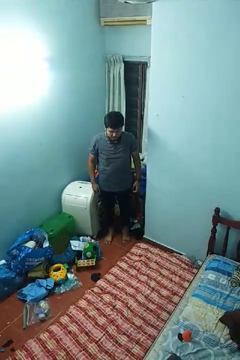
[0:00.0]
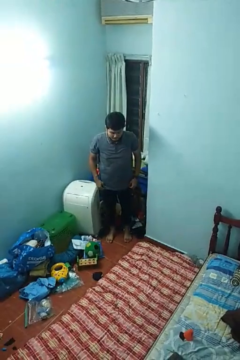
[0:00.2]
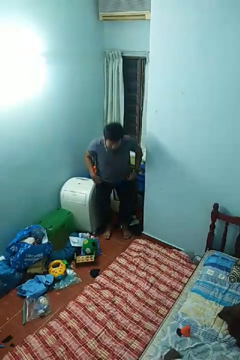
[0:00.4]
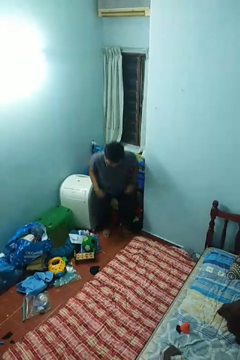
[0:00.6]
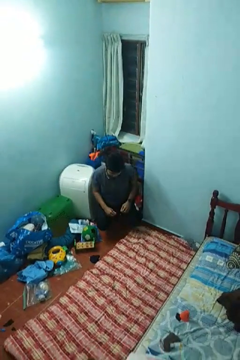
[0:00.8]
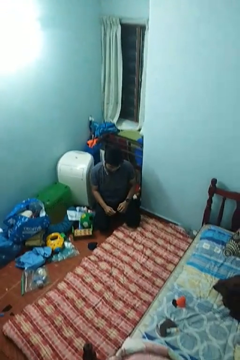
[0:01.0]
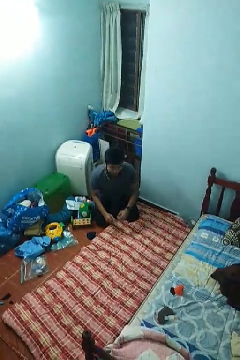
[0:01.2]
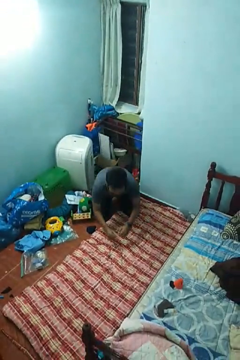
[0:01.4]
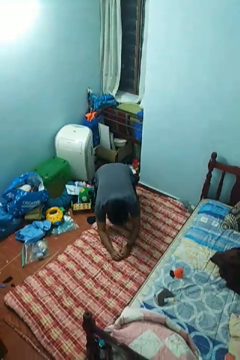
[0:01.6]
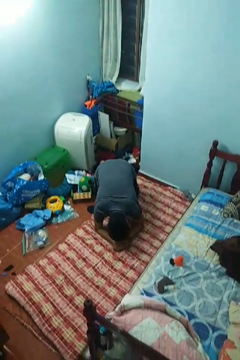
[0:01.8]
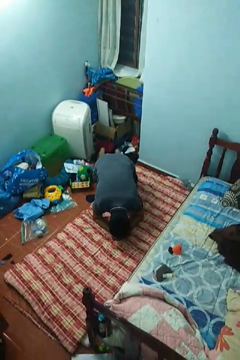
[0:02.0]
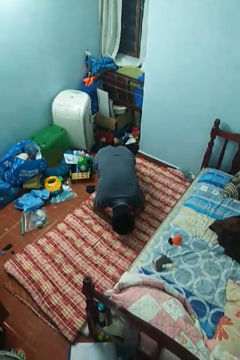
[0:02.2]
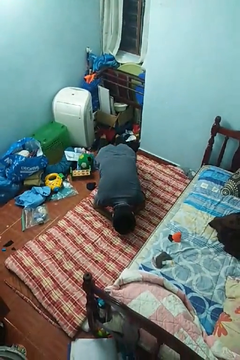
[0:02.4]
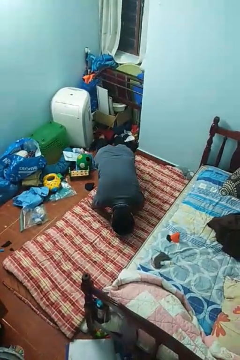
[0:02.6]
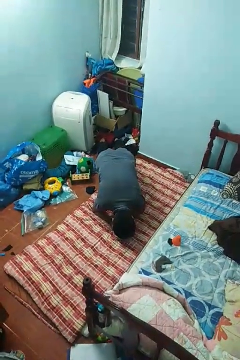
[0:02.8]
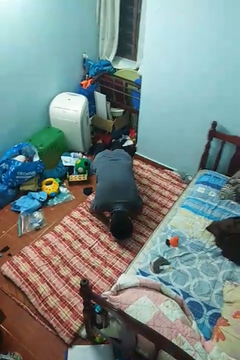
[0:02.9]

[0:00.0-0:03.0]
person exercises with plank

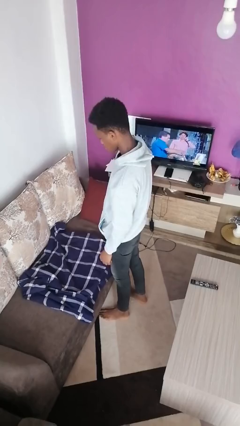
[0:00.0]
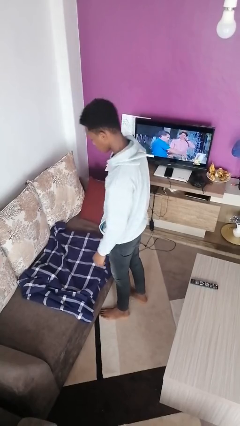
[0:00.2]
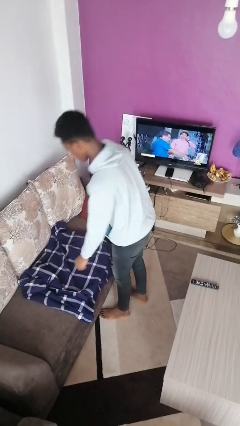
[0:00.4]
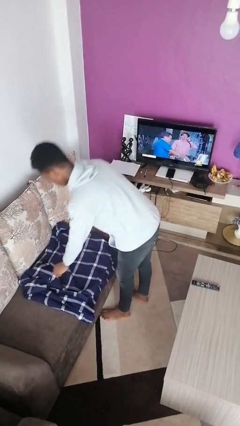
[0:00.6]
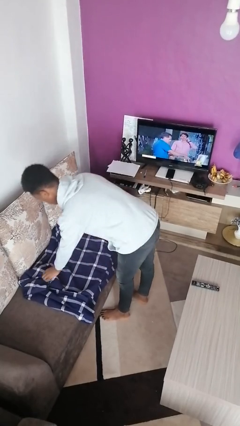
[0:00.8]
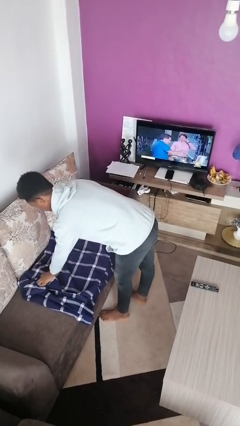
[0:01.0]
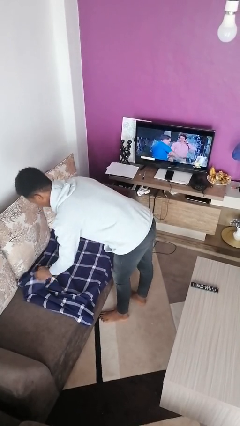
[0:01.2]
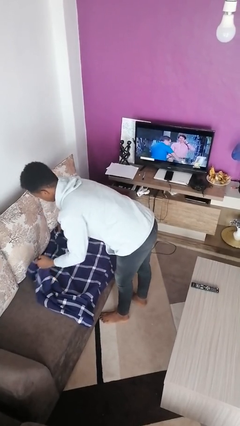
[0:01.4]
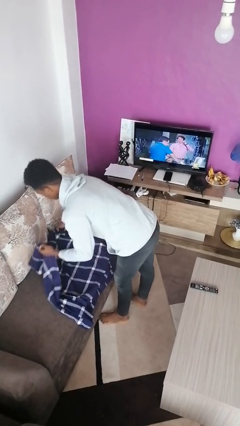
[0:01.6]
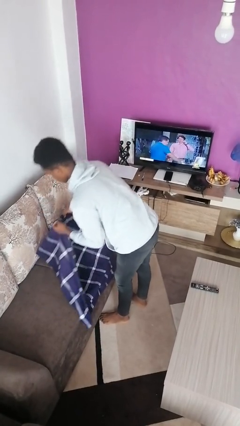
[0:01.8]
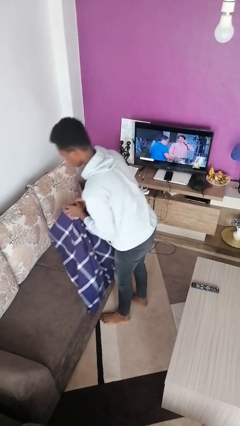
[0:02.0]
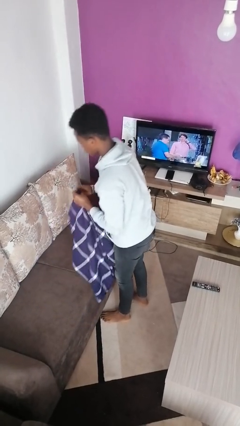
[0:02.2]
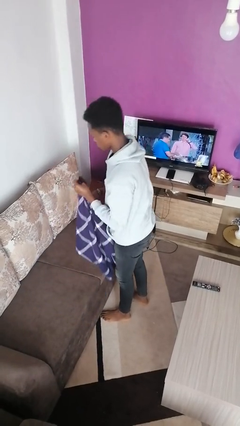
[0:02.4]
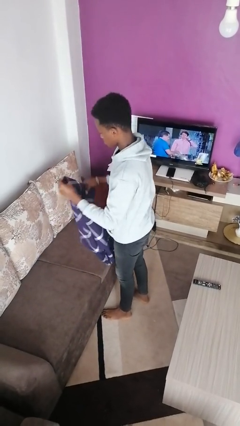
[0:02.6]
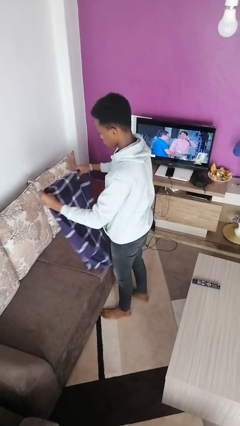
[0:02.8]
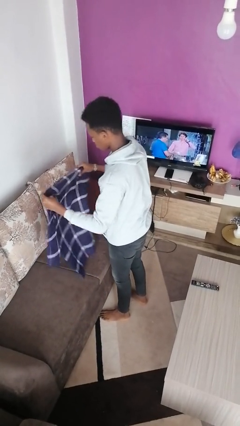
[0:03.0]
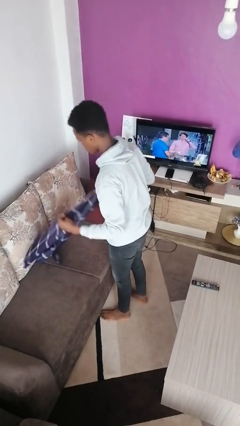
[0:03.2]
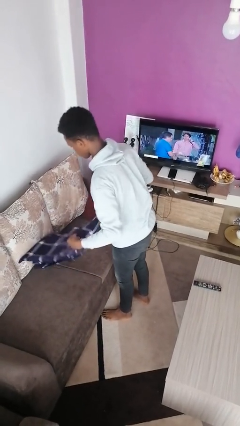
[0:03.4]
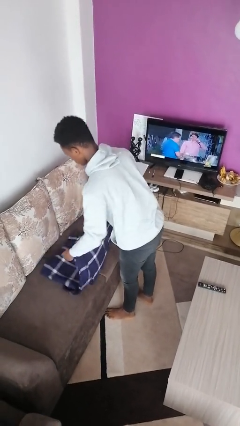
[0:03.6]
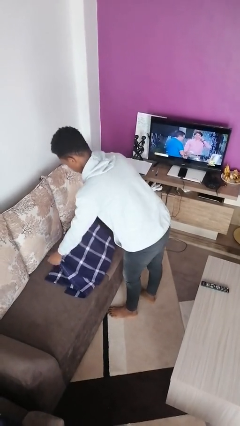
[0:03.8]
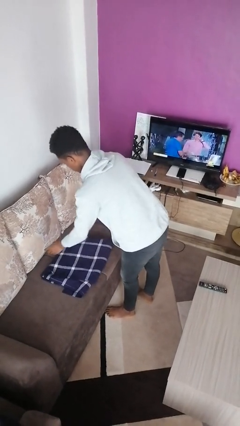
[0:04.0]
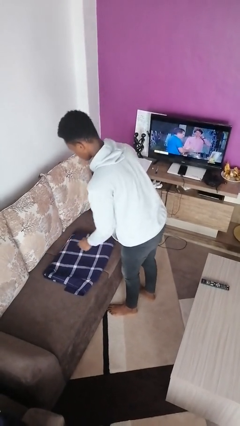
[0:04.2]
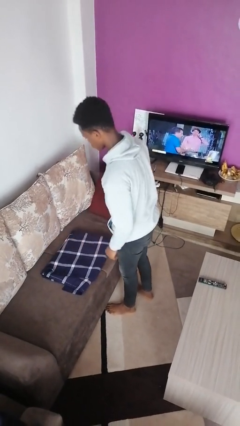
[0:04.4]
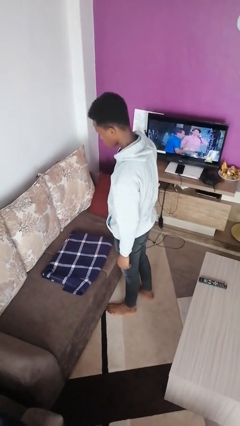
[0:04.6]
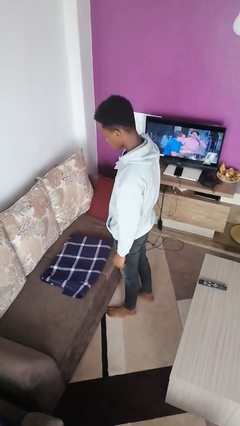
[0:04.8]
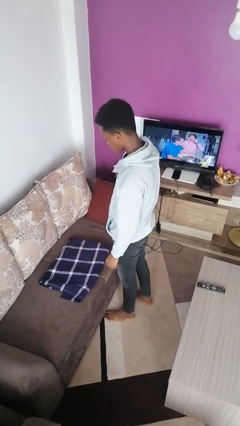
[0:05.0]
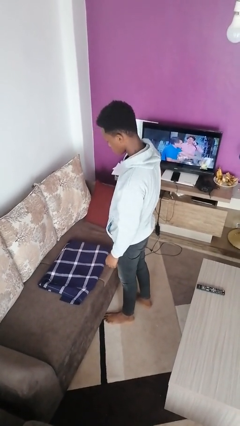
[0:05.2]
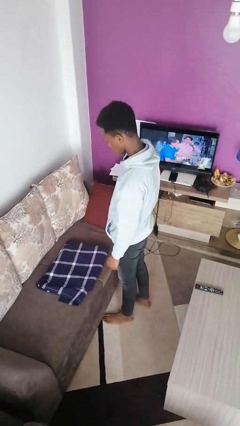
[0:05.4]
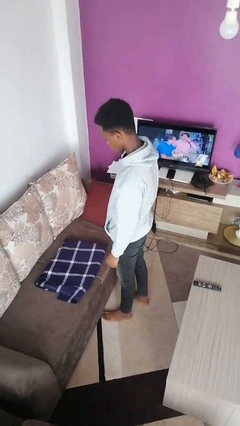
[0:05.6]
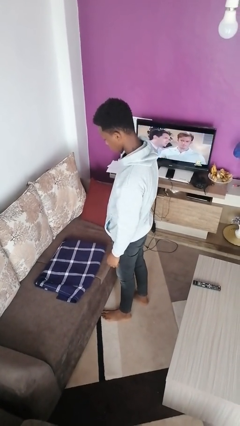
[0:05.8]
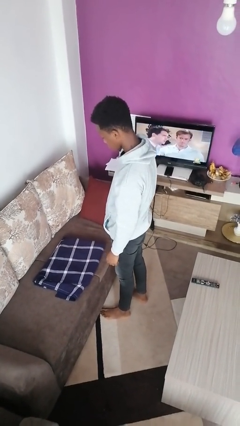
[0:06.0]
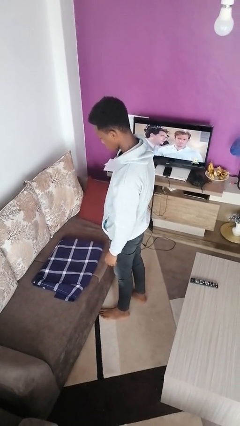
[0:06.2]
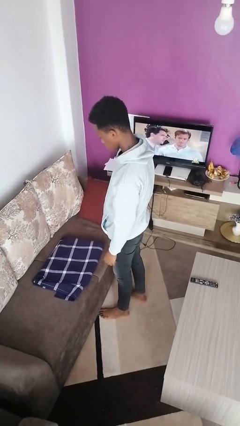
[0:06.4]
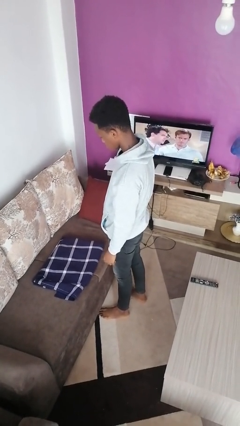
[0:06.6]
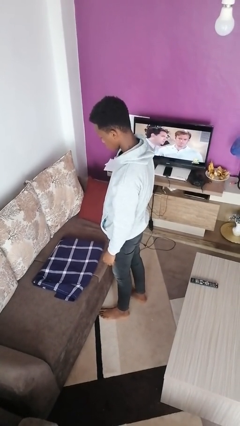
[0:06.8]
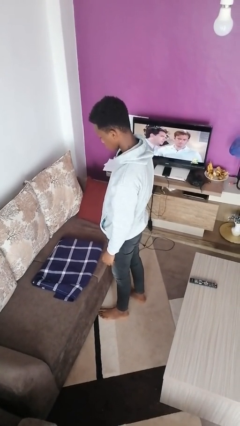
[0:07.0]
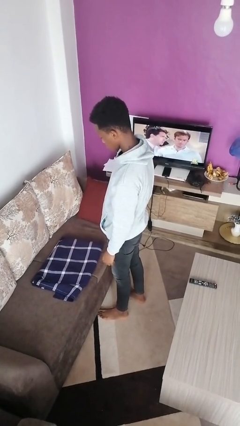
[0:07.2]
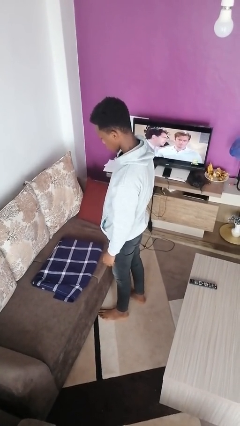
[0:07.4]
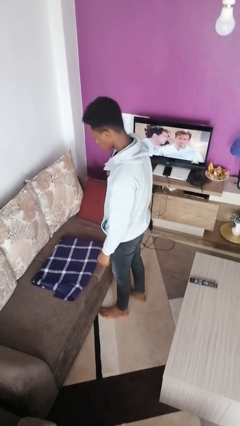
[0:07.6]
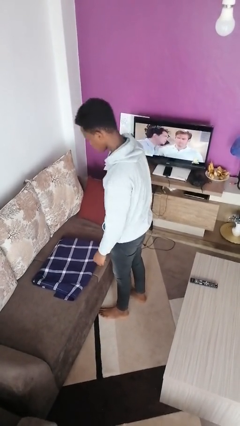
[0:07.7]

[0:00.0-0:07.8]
person folds blanket

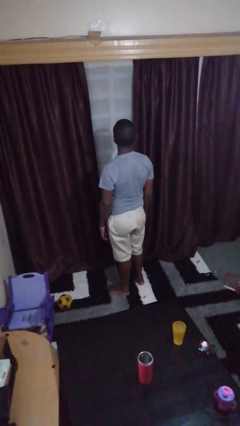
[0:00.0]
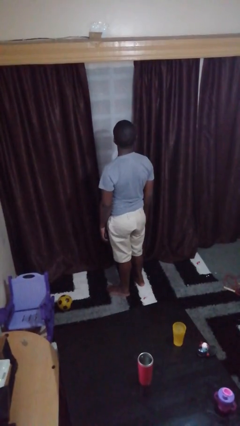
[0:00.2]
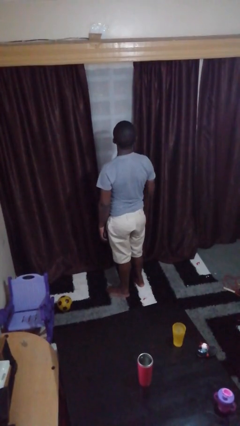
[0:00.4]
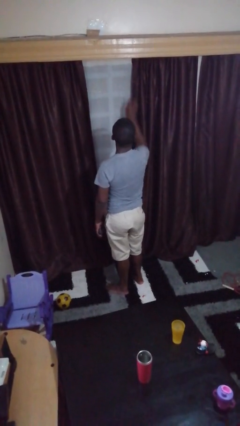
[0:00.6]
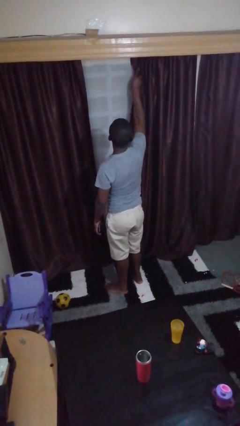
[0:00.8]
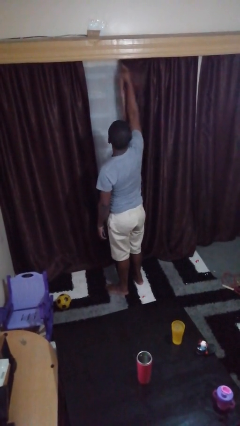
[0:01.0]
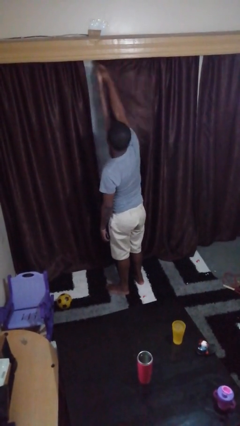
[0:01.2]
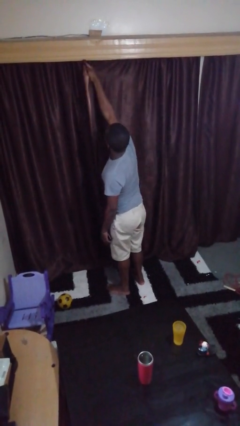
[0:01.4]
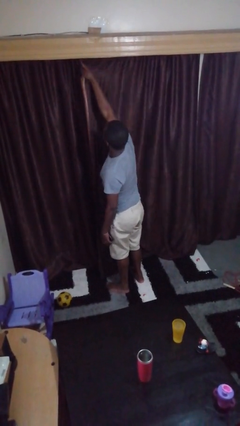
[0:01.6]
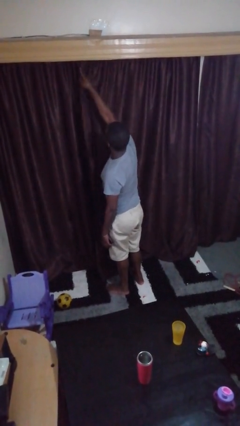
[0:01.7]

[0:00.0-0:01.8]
person closes curtains

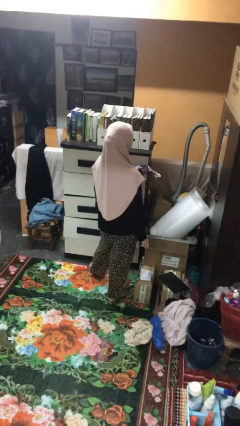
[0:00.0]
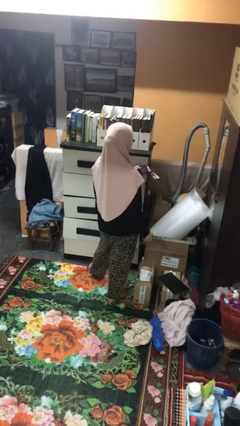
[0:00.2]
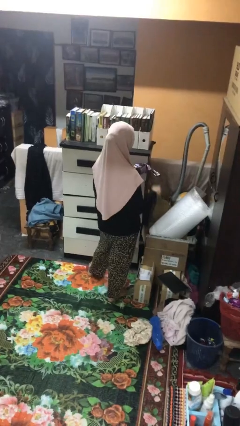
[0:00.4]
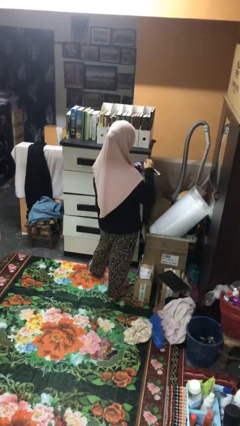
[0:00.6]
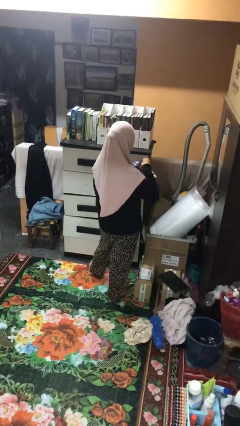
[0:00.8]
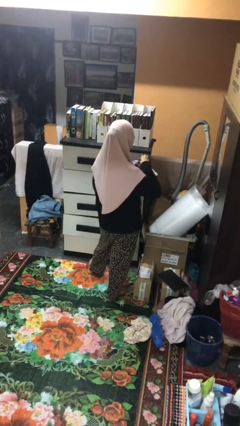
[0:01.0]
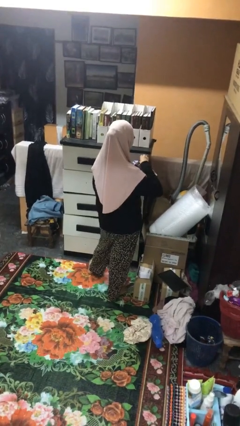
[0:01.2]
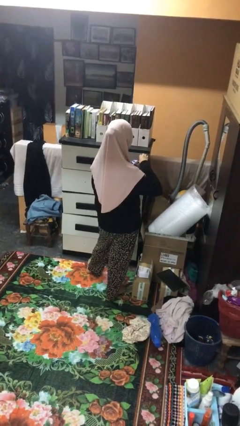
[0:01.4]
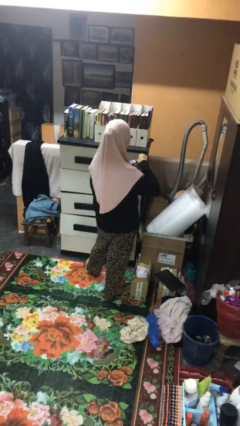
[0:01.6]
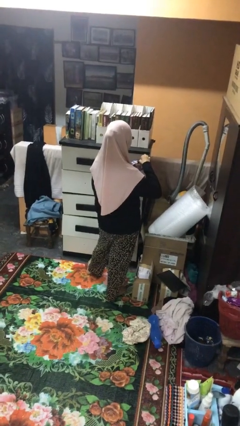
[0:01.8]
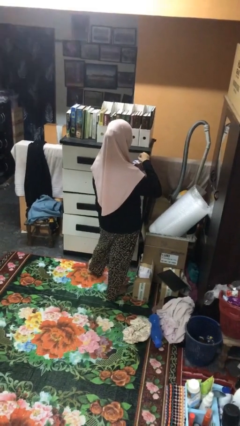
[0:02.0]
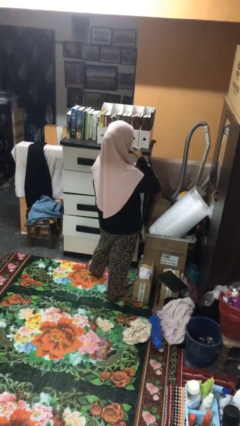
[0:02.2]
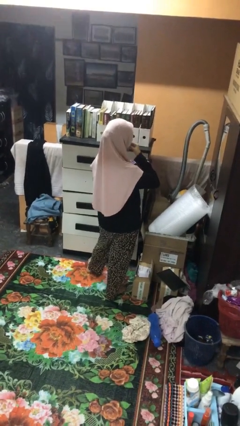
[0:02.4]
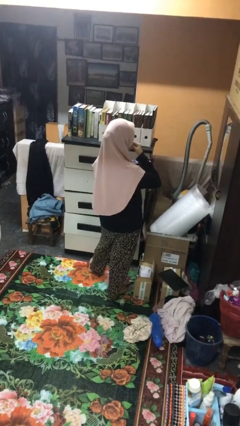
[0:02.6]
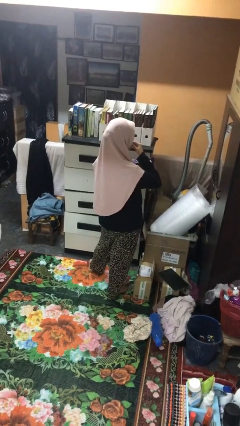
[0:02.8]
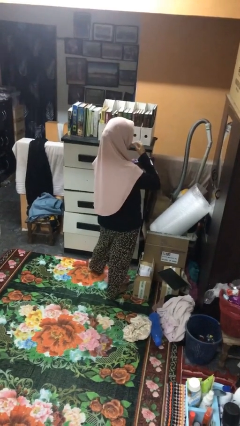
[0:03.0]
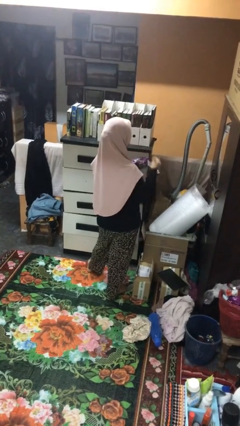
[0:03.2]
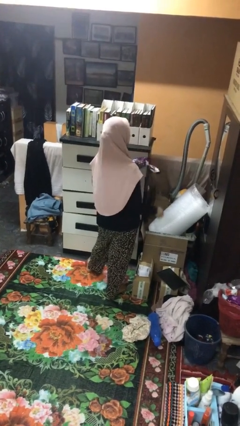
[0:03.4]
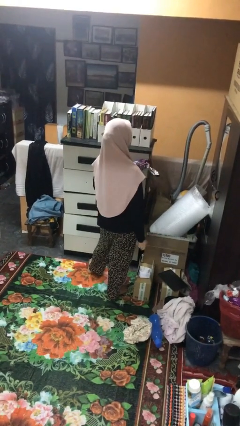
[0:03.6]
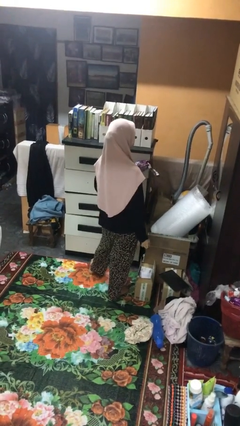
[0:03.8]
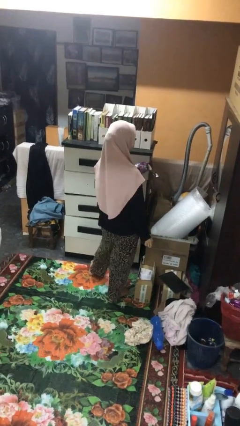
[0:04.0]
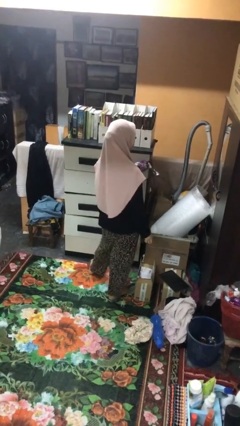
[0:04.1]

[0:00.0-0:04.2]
person eats snack from bag

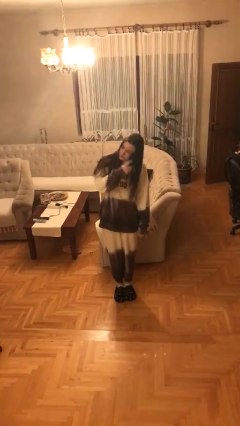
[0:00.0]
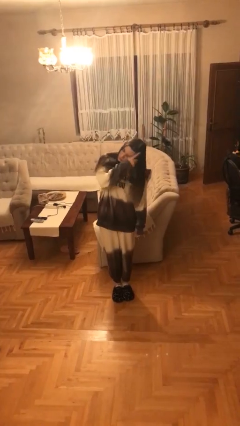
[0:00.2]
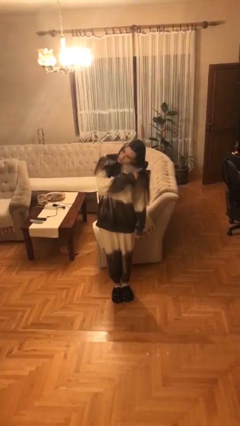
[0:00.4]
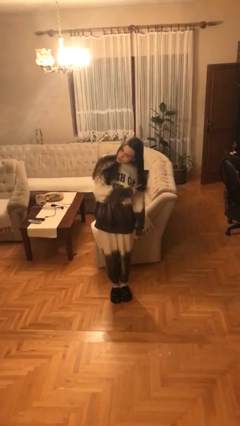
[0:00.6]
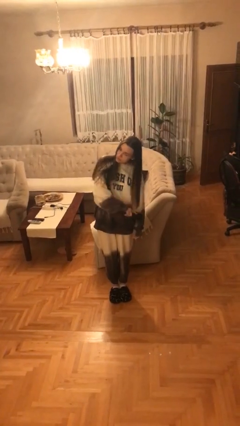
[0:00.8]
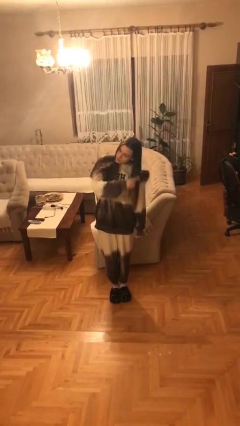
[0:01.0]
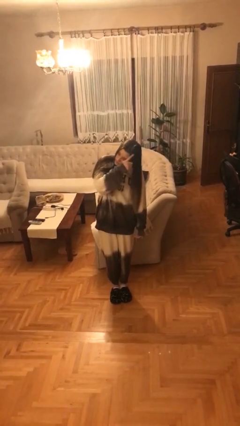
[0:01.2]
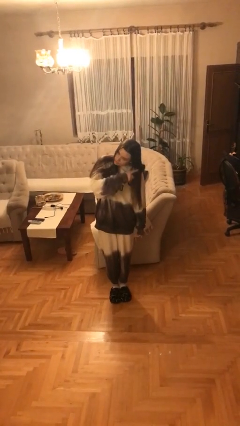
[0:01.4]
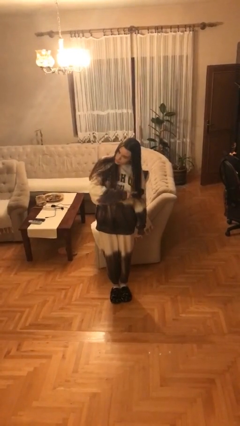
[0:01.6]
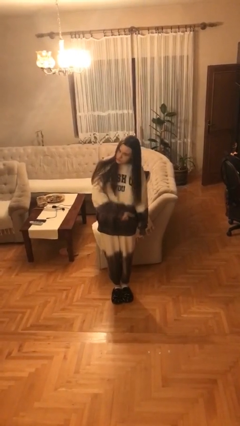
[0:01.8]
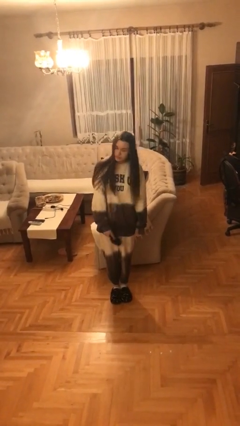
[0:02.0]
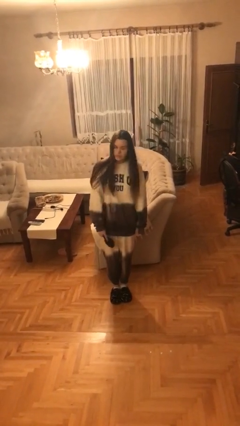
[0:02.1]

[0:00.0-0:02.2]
person brushes hair
